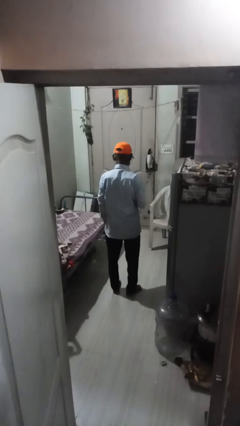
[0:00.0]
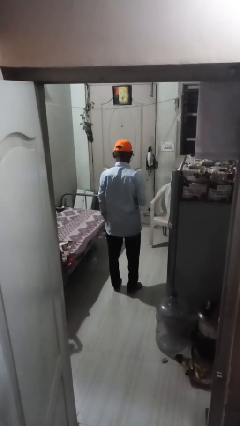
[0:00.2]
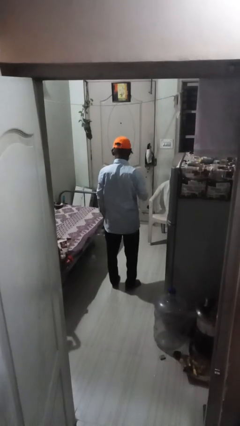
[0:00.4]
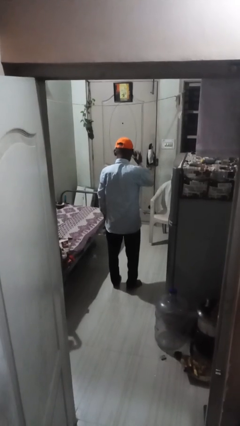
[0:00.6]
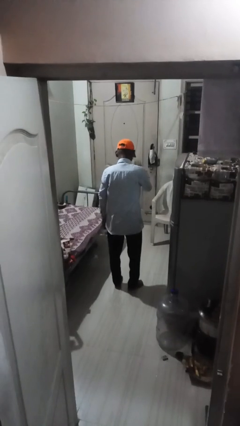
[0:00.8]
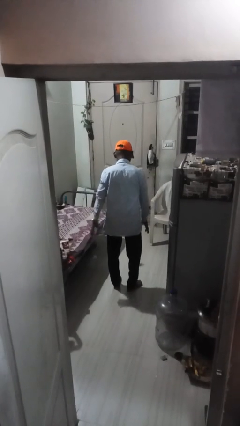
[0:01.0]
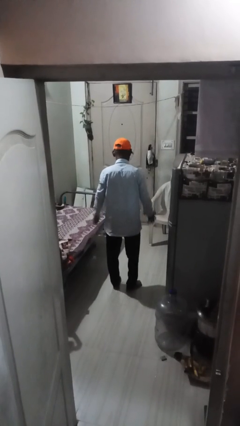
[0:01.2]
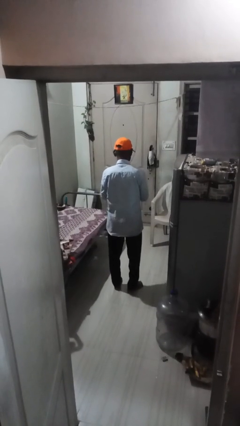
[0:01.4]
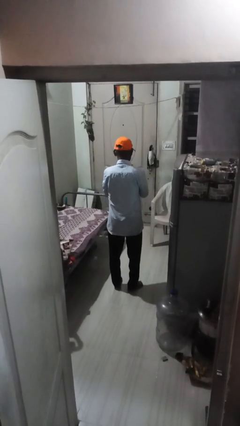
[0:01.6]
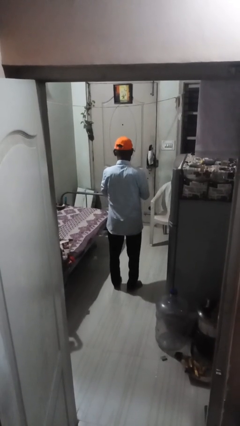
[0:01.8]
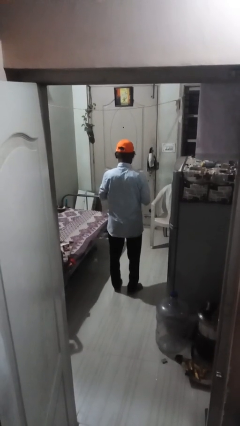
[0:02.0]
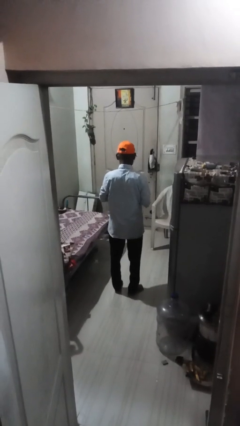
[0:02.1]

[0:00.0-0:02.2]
person bounces ball on floor

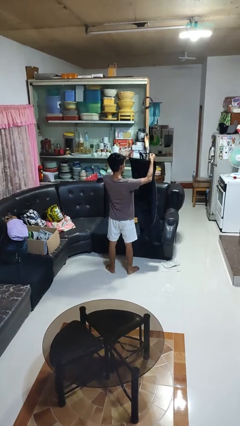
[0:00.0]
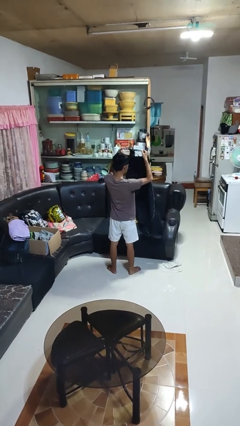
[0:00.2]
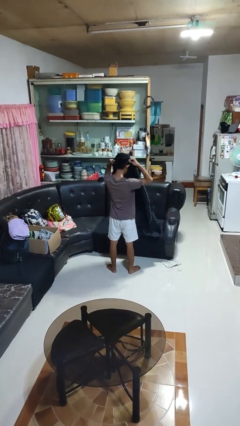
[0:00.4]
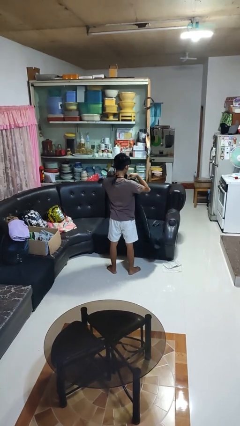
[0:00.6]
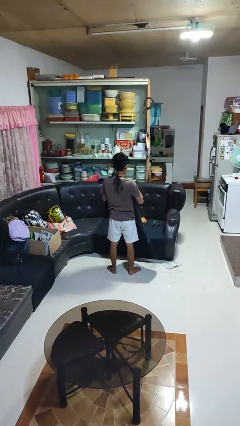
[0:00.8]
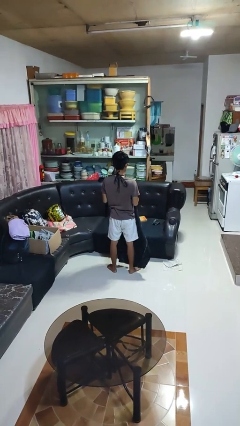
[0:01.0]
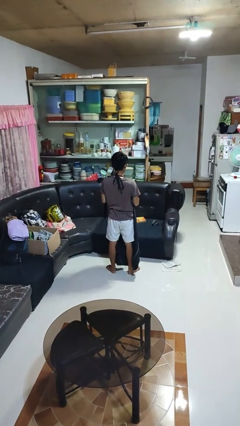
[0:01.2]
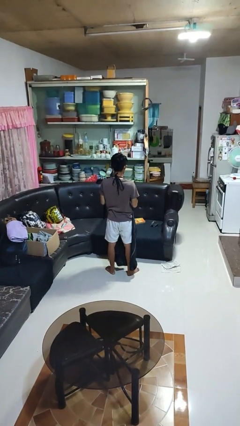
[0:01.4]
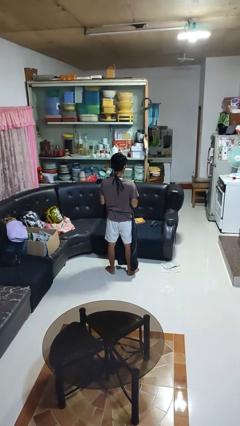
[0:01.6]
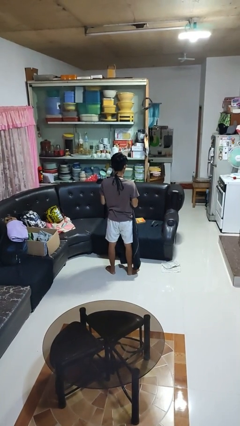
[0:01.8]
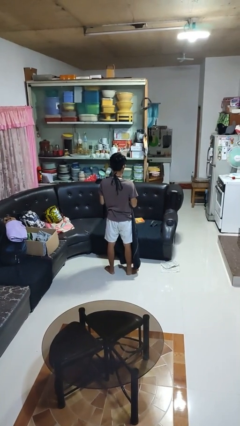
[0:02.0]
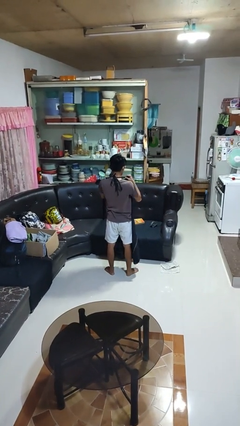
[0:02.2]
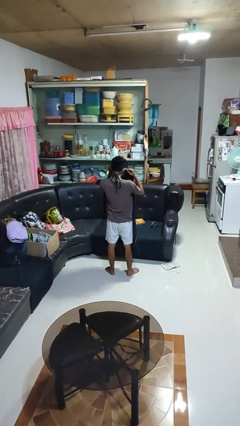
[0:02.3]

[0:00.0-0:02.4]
person puts on apron

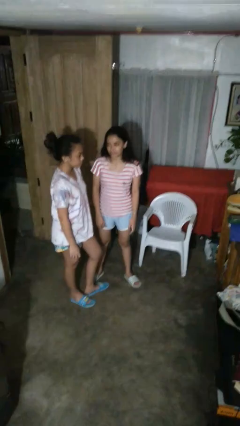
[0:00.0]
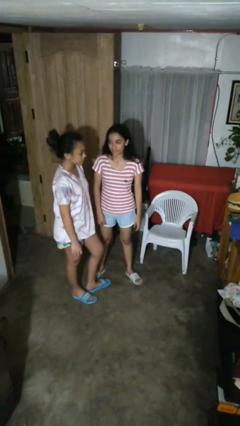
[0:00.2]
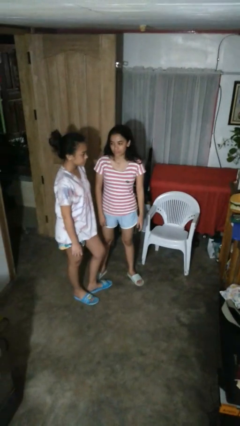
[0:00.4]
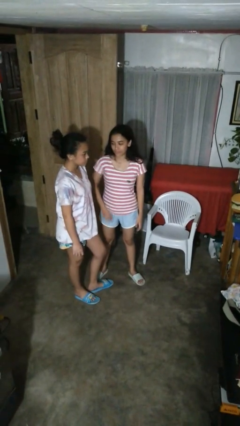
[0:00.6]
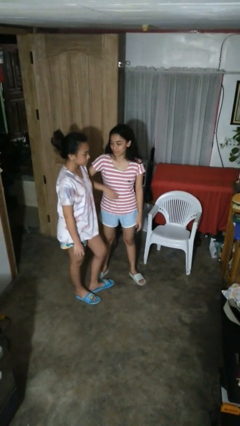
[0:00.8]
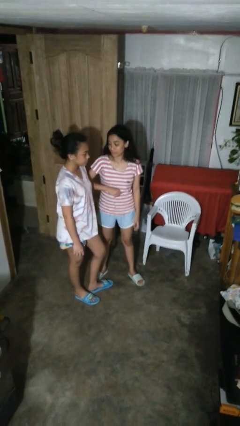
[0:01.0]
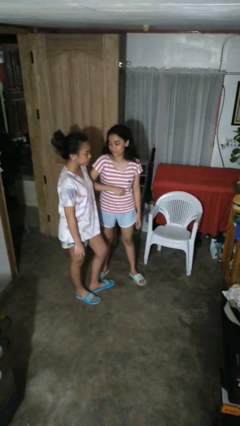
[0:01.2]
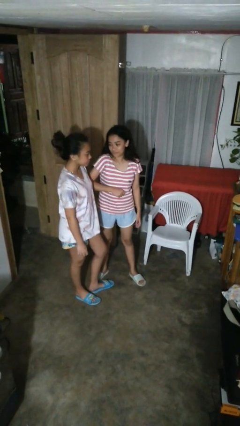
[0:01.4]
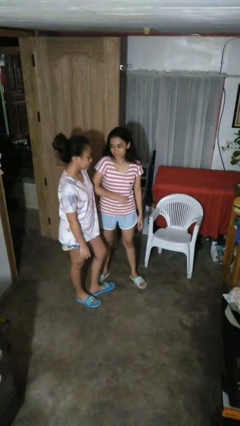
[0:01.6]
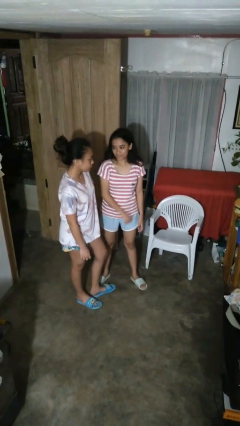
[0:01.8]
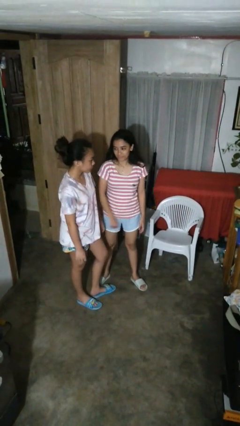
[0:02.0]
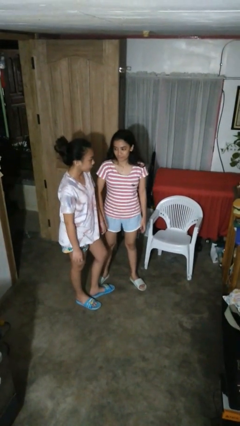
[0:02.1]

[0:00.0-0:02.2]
person nudges person with elbow

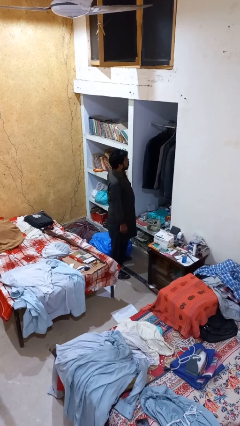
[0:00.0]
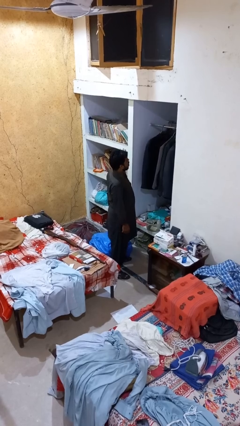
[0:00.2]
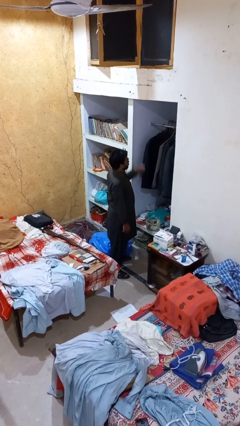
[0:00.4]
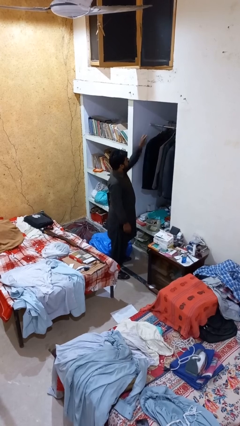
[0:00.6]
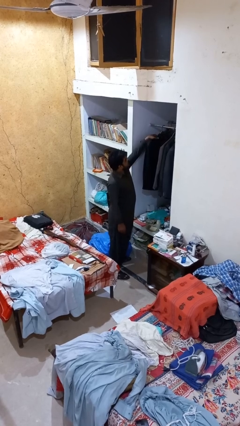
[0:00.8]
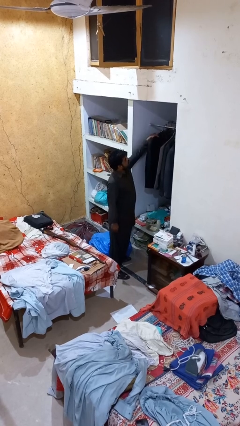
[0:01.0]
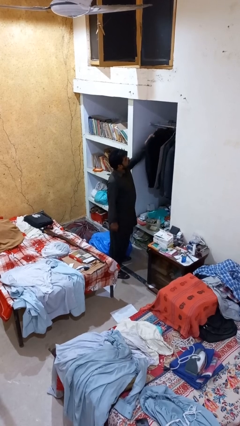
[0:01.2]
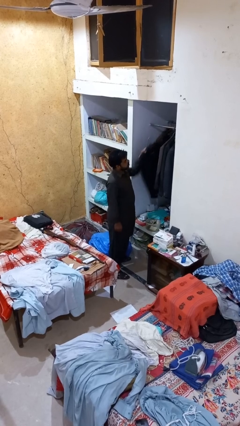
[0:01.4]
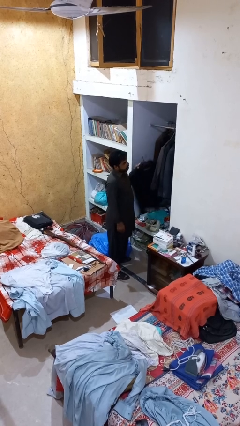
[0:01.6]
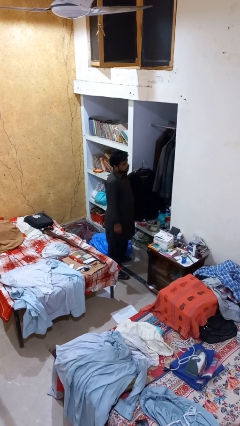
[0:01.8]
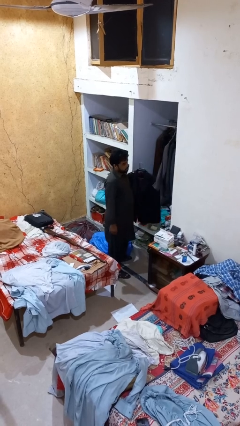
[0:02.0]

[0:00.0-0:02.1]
person takes clothes from closet

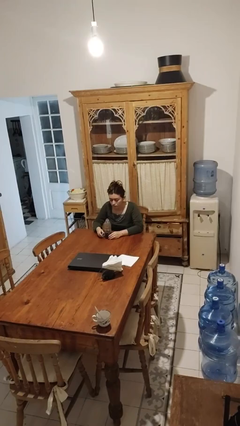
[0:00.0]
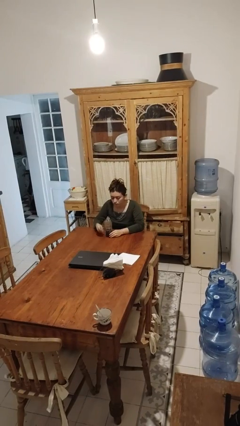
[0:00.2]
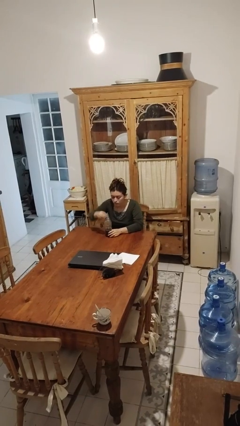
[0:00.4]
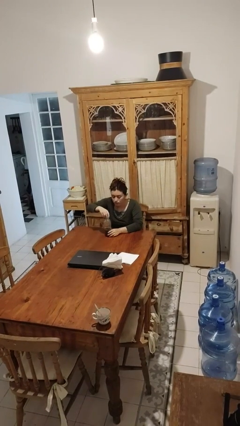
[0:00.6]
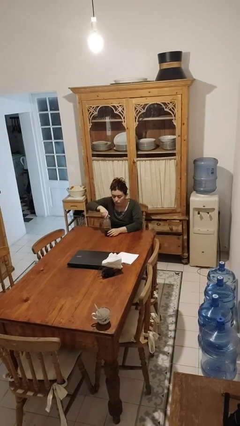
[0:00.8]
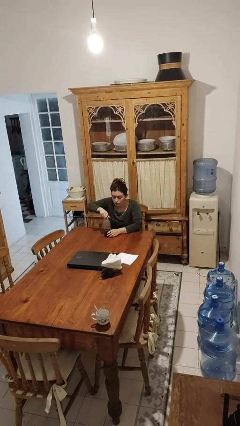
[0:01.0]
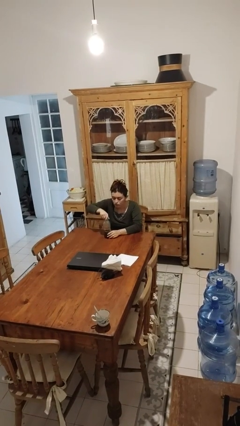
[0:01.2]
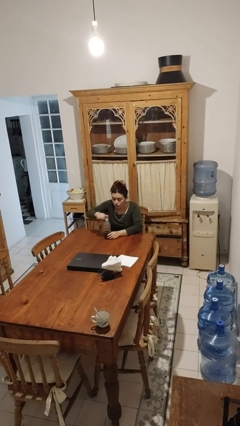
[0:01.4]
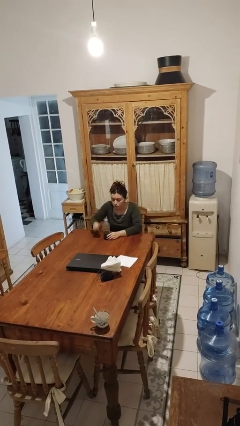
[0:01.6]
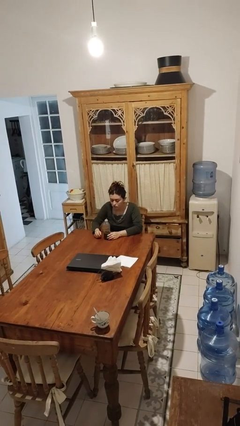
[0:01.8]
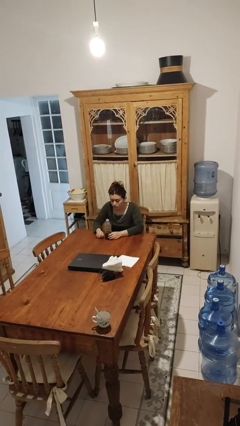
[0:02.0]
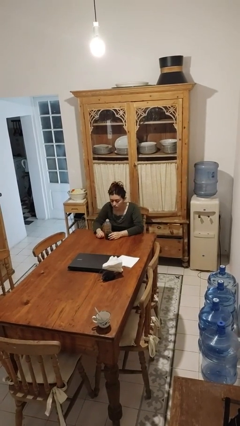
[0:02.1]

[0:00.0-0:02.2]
person screws lid to bottle

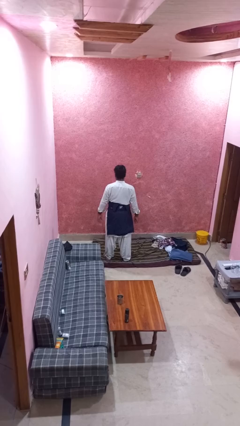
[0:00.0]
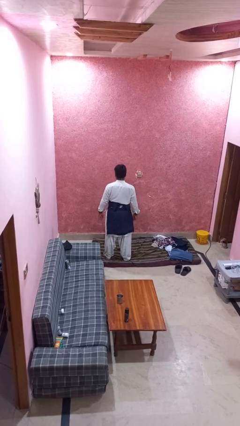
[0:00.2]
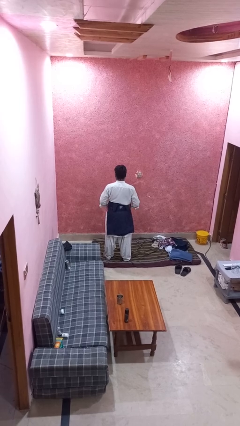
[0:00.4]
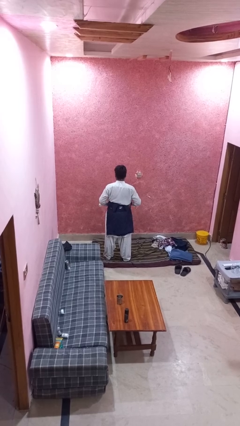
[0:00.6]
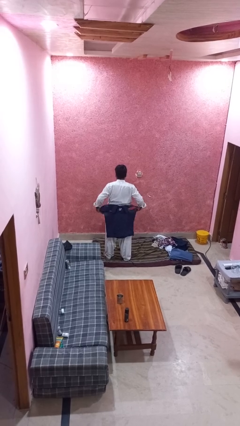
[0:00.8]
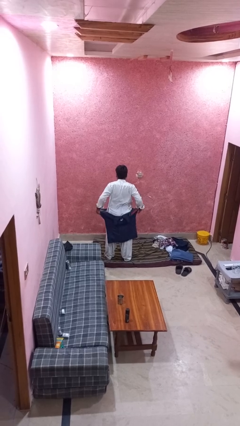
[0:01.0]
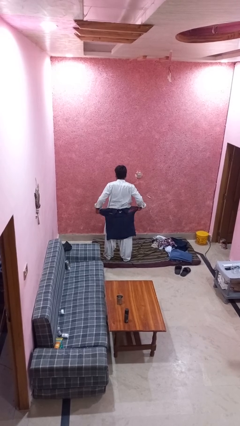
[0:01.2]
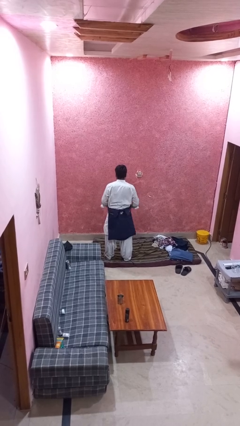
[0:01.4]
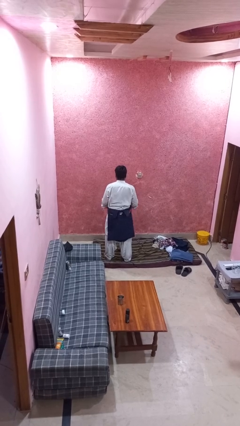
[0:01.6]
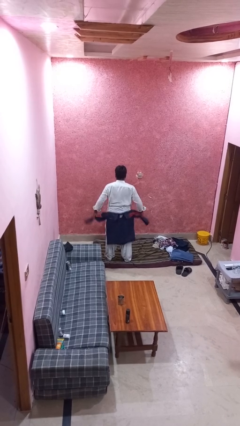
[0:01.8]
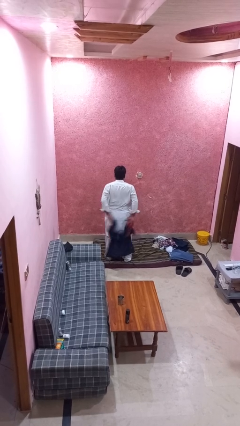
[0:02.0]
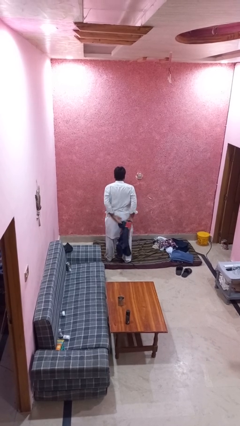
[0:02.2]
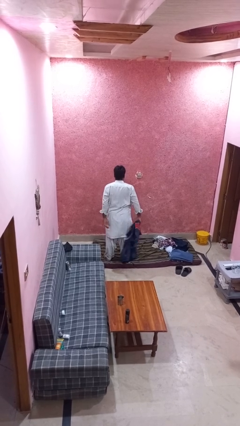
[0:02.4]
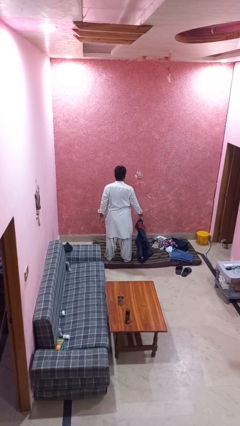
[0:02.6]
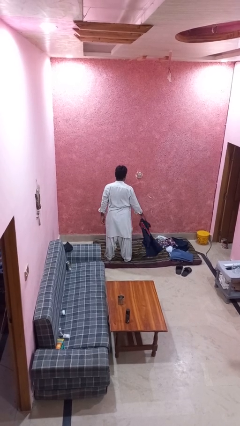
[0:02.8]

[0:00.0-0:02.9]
person unties jacket around waist

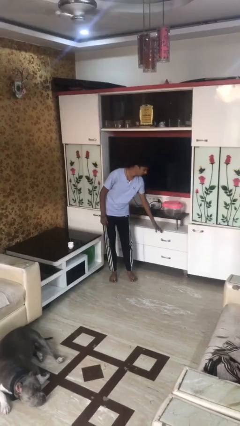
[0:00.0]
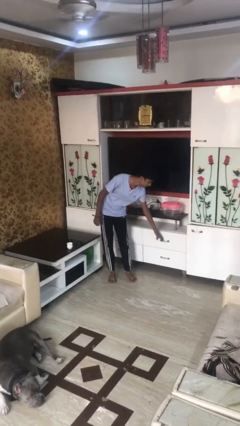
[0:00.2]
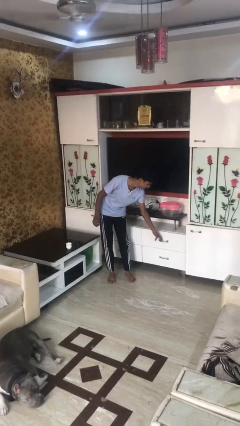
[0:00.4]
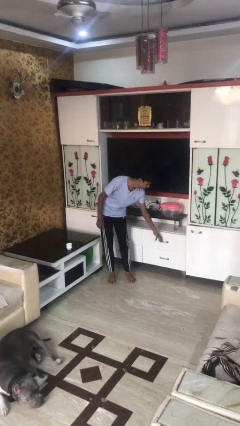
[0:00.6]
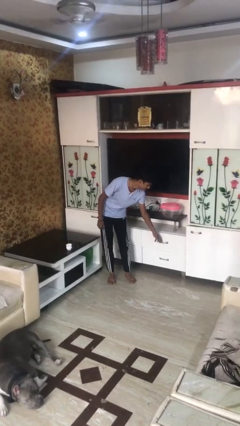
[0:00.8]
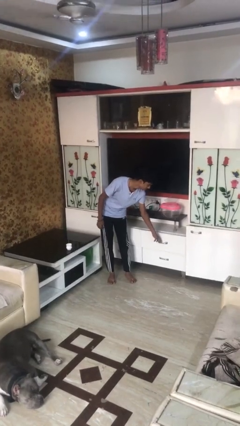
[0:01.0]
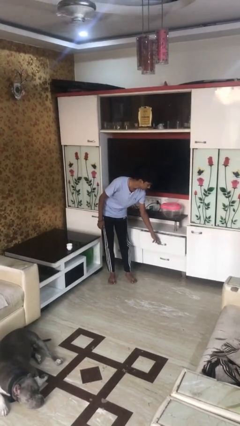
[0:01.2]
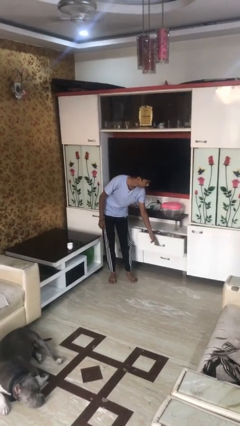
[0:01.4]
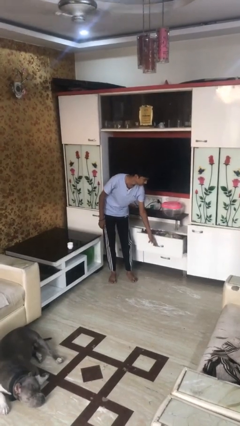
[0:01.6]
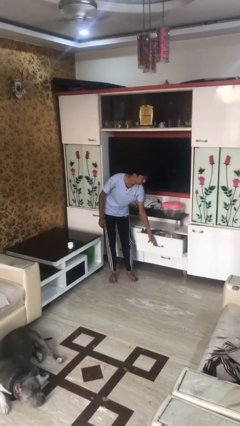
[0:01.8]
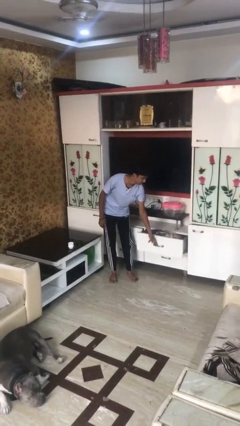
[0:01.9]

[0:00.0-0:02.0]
person opens dresser drawer

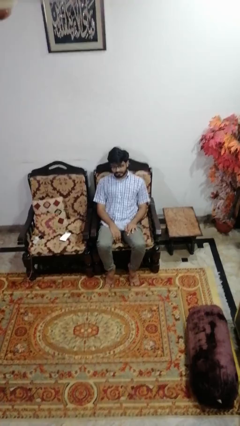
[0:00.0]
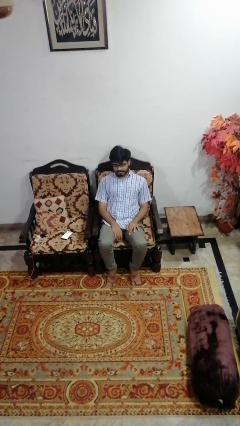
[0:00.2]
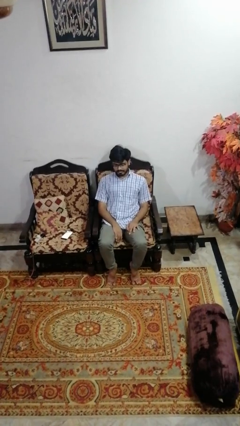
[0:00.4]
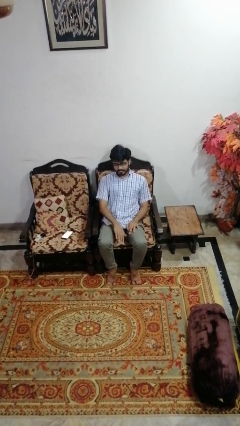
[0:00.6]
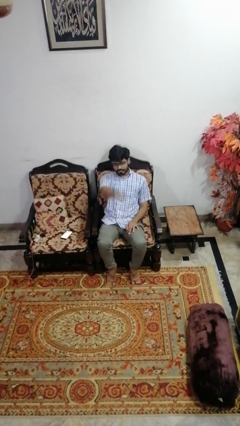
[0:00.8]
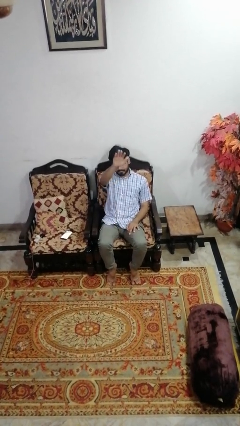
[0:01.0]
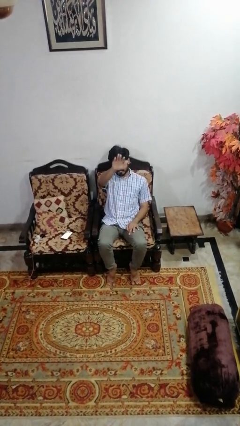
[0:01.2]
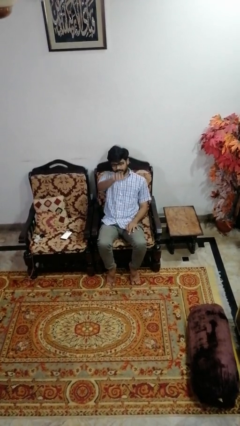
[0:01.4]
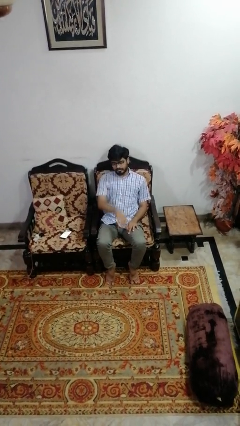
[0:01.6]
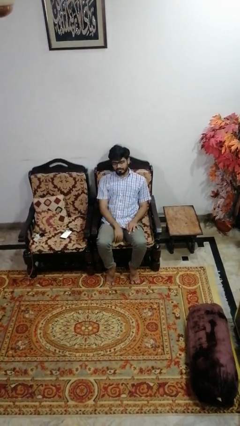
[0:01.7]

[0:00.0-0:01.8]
person gestures swipe up
